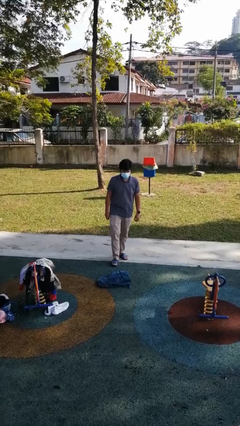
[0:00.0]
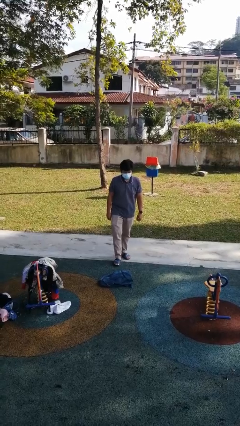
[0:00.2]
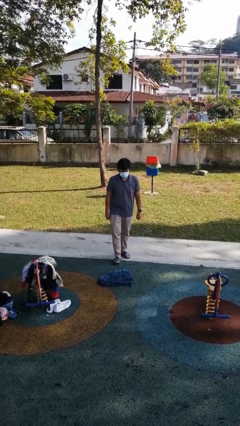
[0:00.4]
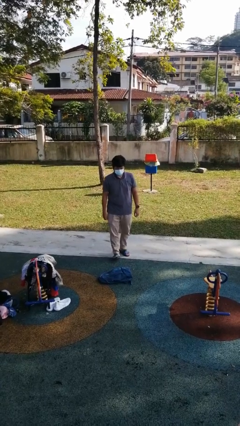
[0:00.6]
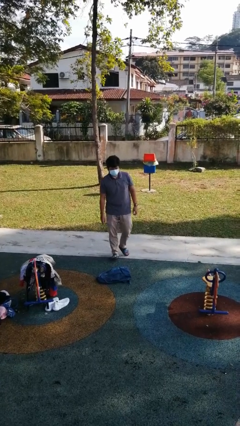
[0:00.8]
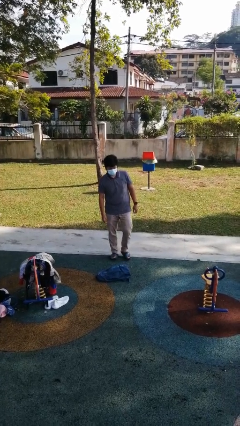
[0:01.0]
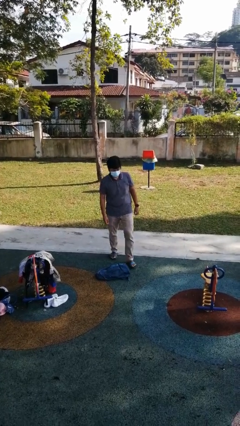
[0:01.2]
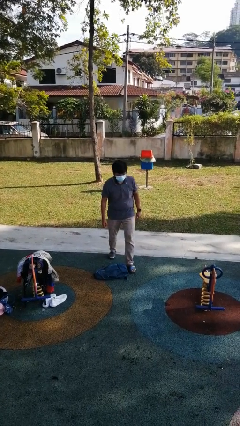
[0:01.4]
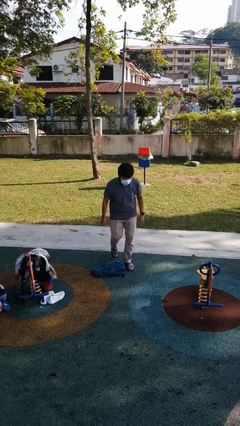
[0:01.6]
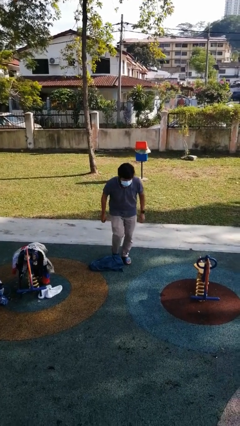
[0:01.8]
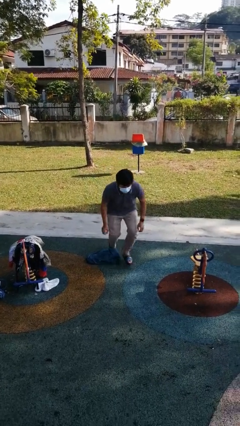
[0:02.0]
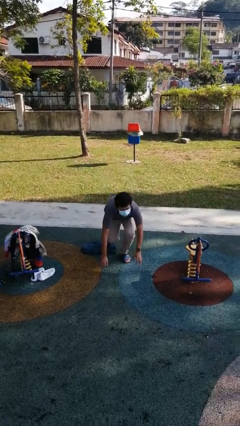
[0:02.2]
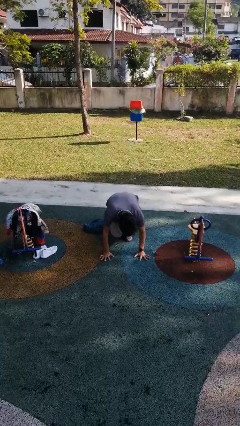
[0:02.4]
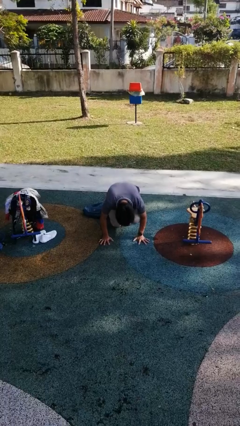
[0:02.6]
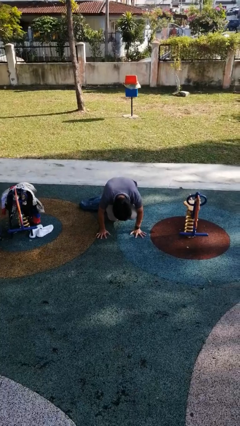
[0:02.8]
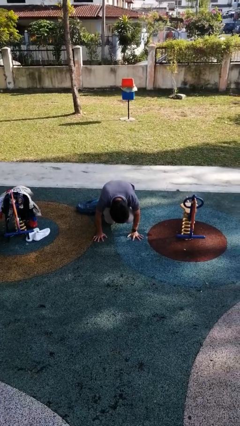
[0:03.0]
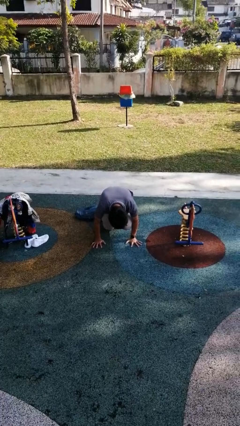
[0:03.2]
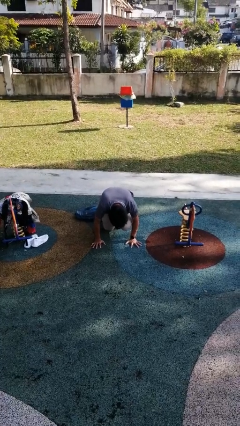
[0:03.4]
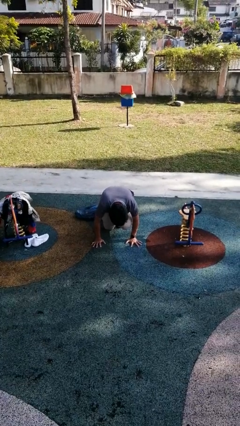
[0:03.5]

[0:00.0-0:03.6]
person trips on object on floor

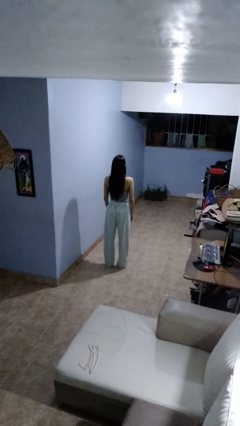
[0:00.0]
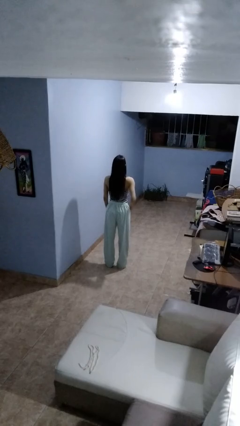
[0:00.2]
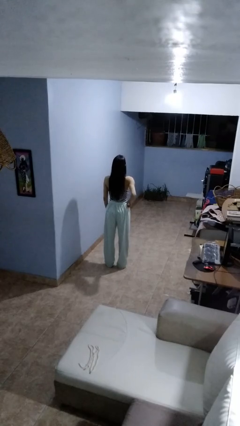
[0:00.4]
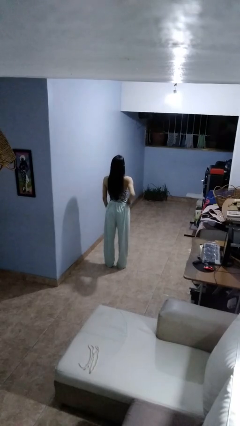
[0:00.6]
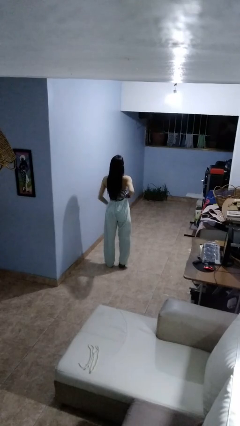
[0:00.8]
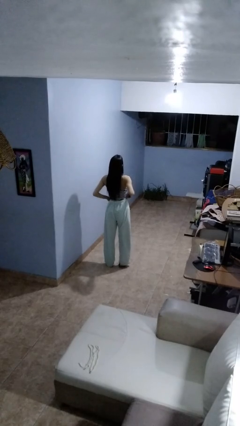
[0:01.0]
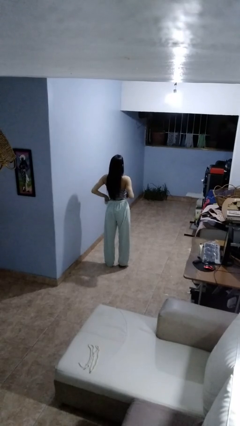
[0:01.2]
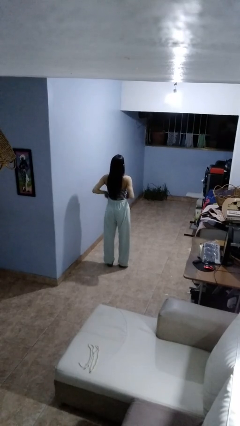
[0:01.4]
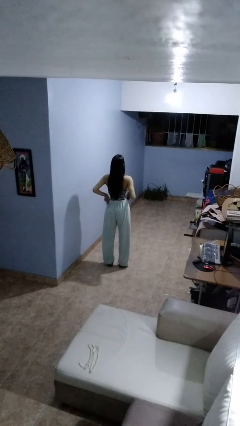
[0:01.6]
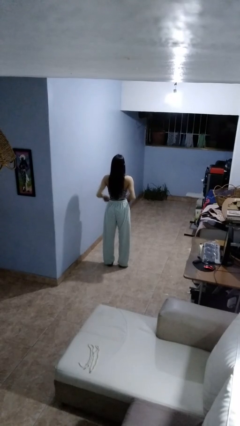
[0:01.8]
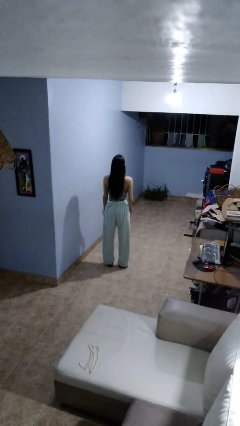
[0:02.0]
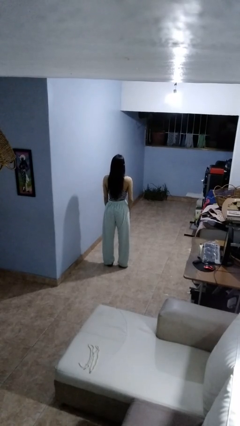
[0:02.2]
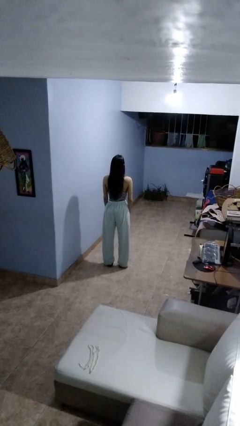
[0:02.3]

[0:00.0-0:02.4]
person hikes up pants

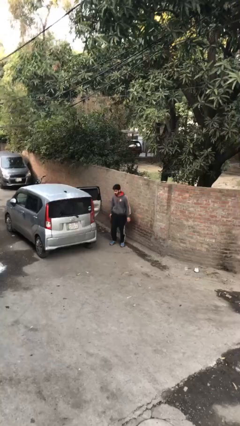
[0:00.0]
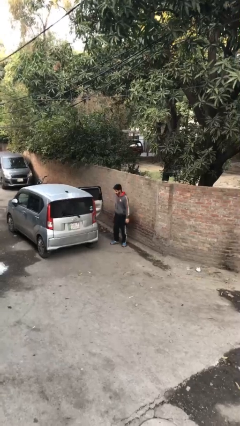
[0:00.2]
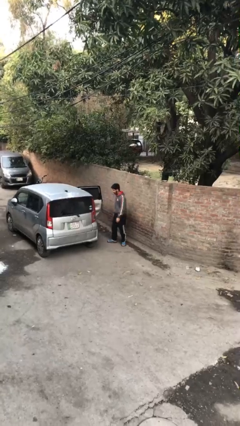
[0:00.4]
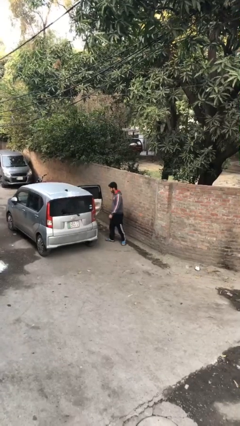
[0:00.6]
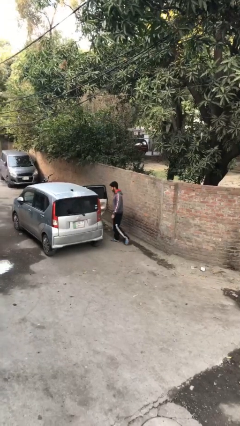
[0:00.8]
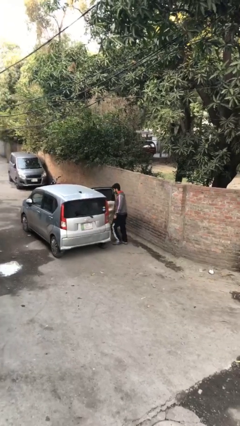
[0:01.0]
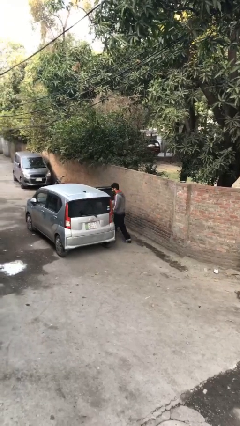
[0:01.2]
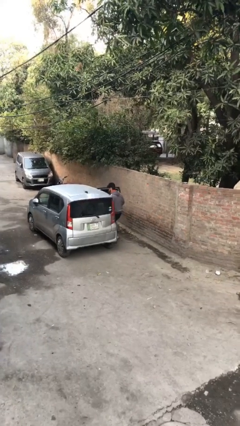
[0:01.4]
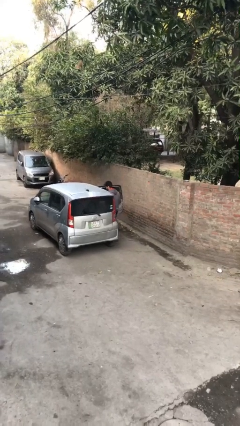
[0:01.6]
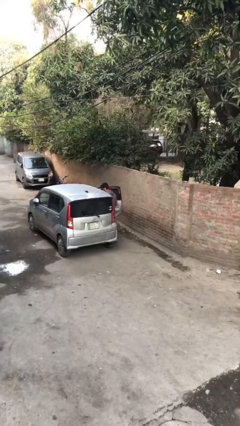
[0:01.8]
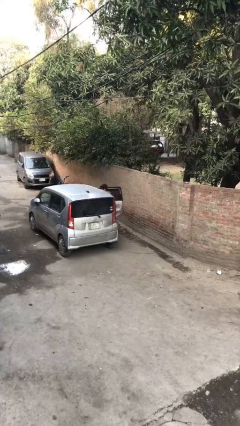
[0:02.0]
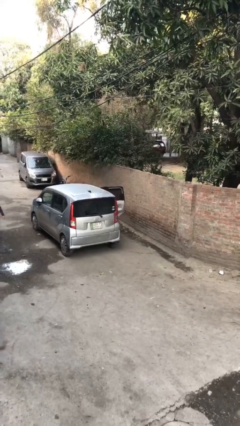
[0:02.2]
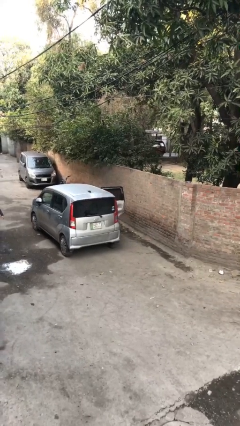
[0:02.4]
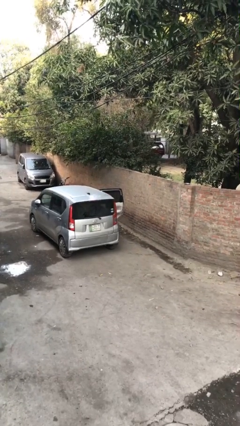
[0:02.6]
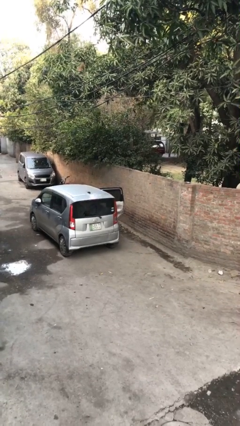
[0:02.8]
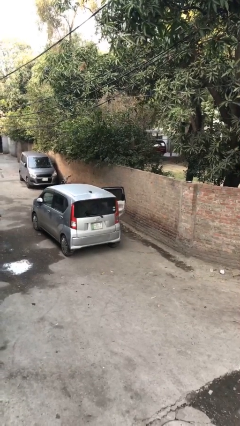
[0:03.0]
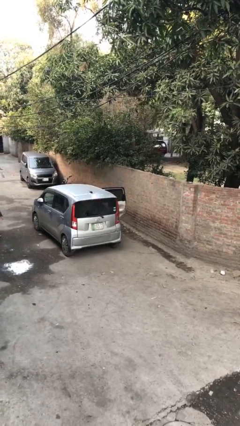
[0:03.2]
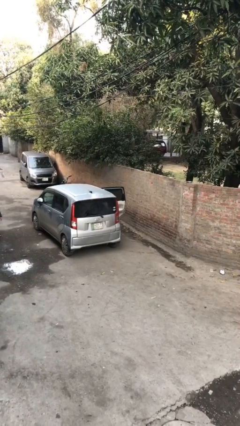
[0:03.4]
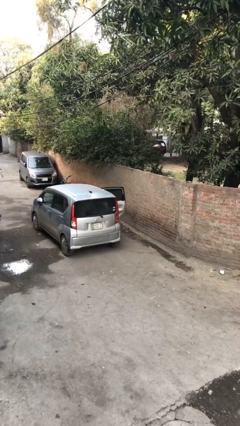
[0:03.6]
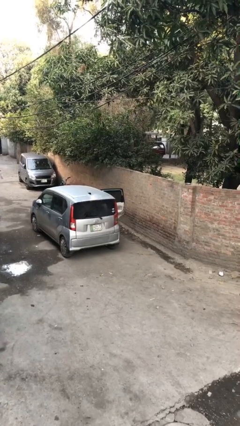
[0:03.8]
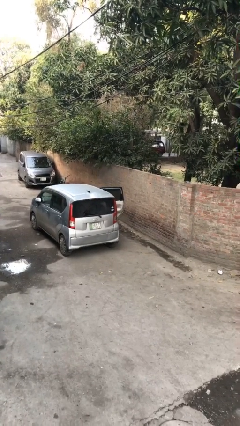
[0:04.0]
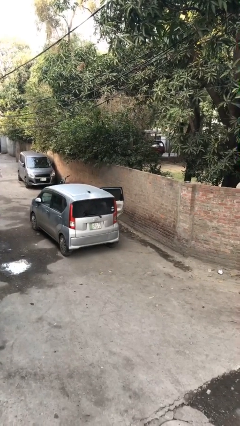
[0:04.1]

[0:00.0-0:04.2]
person enters car

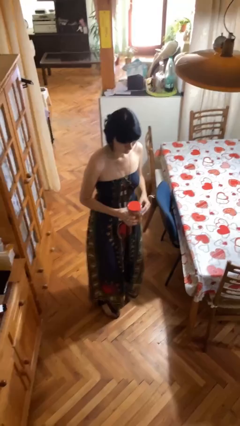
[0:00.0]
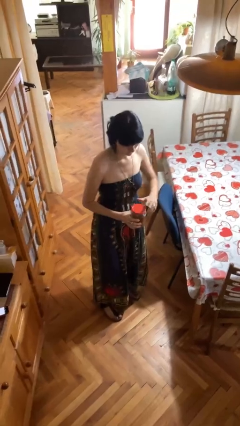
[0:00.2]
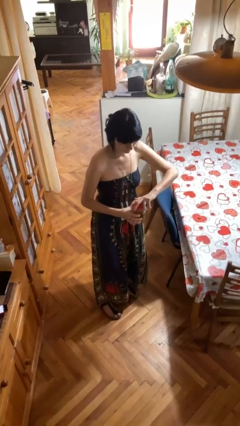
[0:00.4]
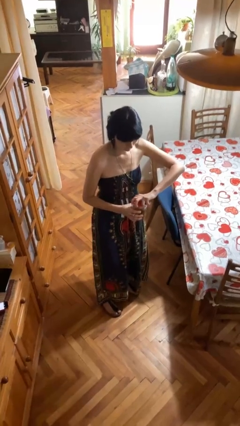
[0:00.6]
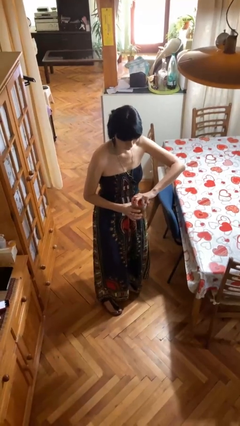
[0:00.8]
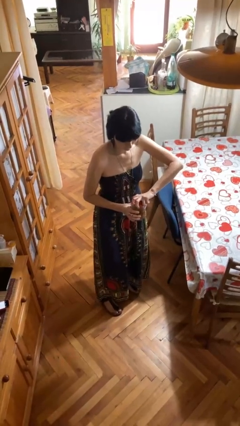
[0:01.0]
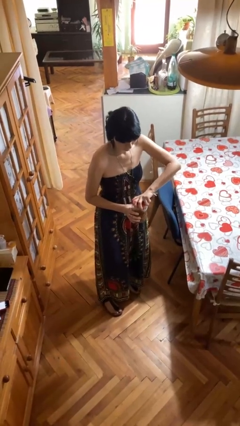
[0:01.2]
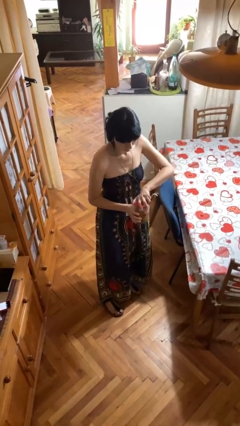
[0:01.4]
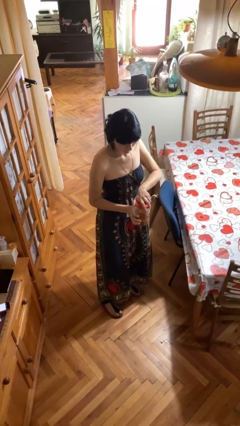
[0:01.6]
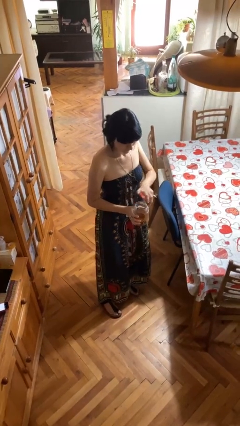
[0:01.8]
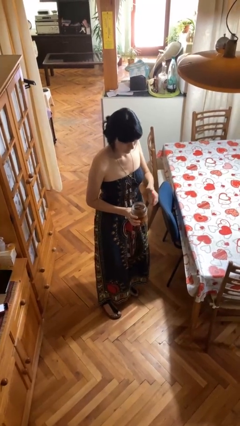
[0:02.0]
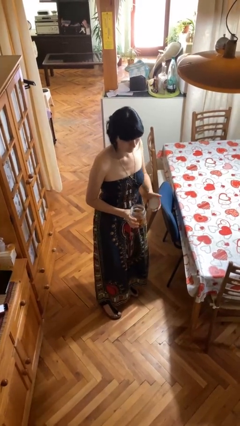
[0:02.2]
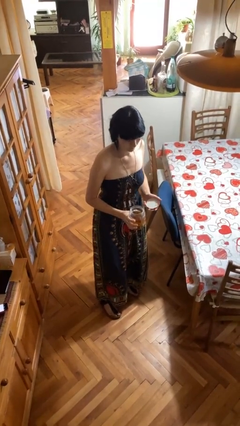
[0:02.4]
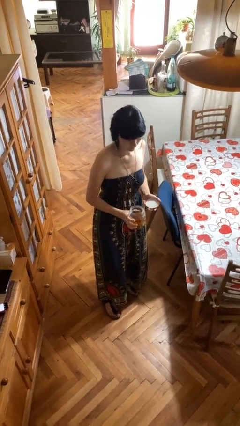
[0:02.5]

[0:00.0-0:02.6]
person opens jar

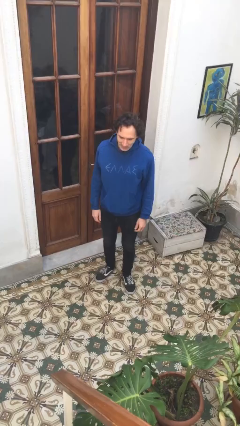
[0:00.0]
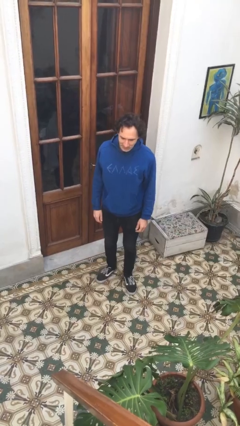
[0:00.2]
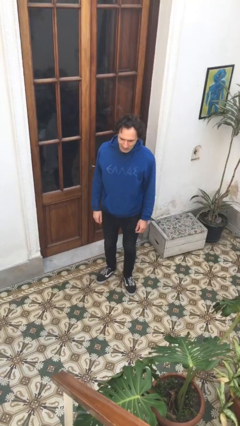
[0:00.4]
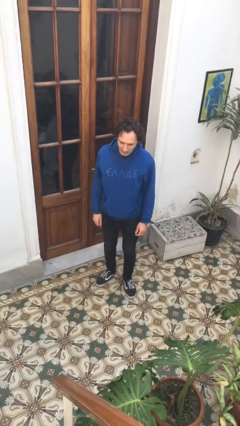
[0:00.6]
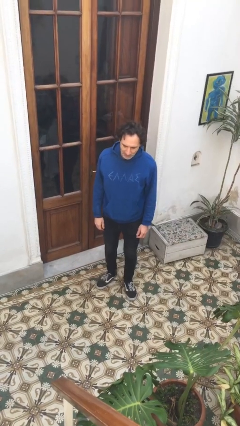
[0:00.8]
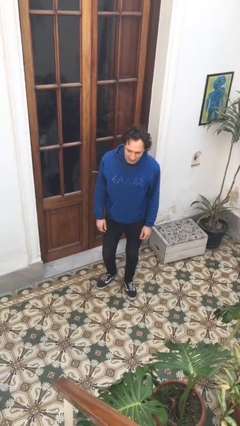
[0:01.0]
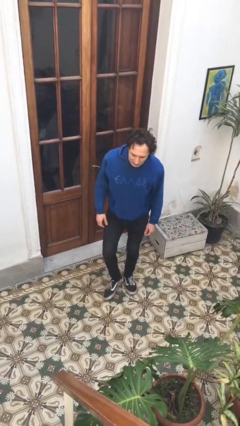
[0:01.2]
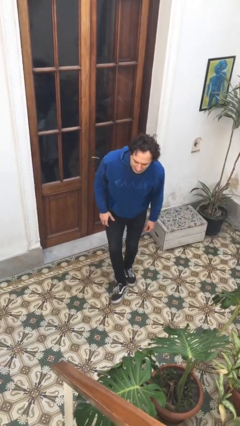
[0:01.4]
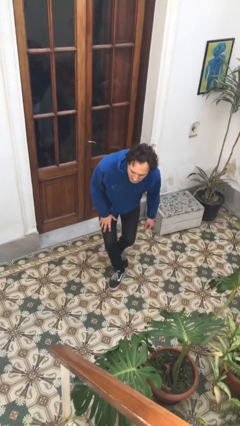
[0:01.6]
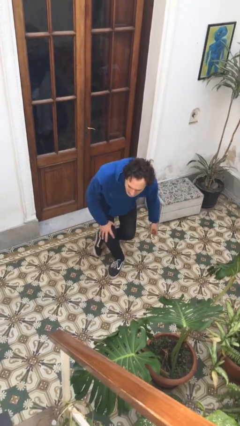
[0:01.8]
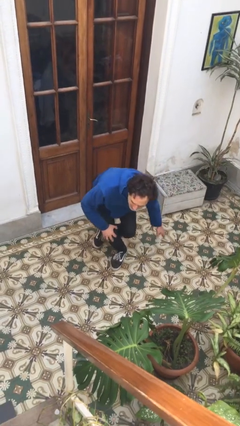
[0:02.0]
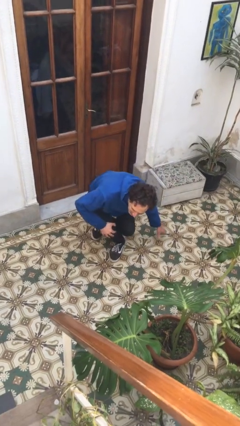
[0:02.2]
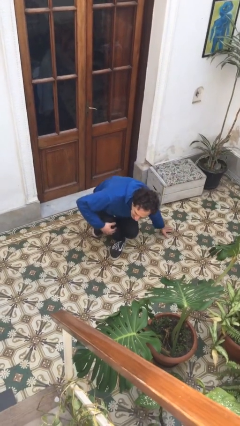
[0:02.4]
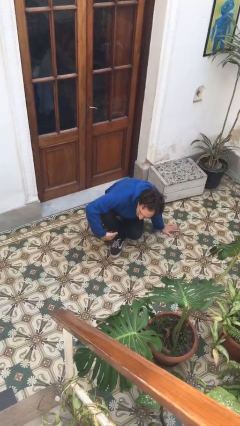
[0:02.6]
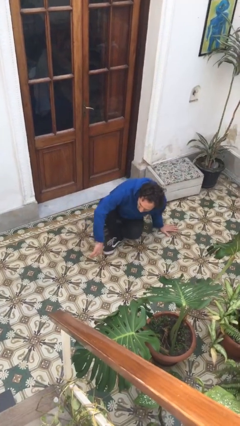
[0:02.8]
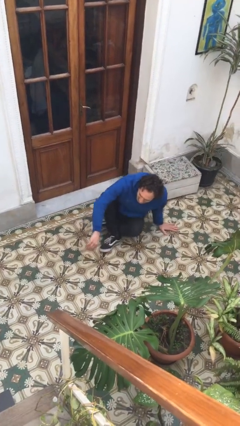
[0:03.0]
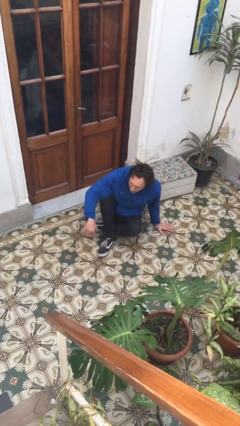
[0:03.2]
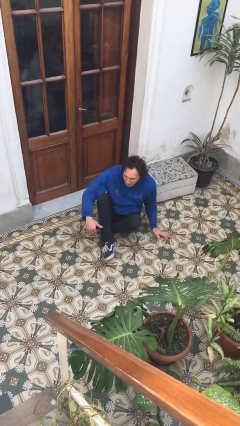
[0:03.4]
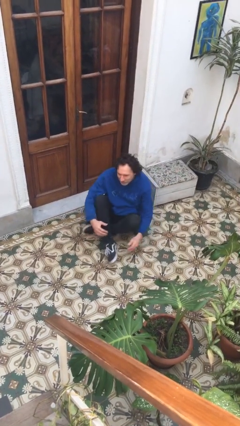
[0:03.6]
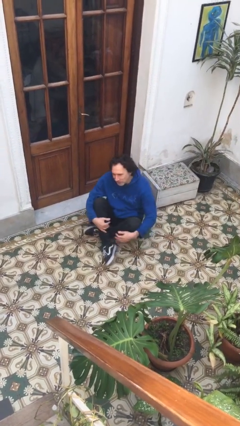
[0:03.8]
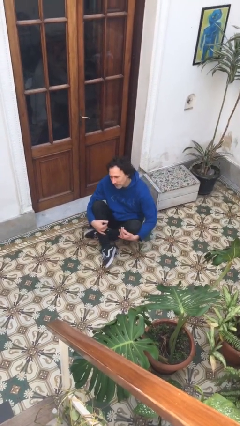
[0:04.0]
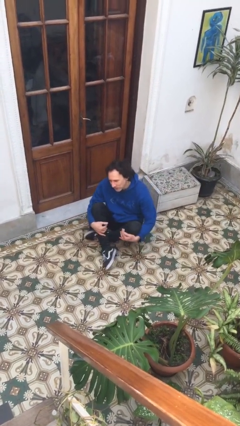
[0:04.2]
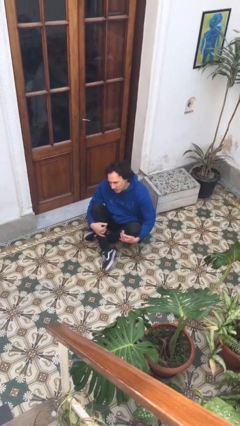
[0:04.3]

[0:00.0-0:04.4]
person sits crisscross
